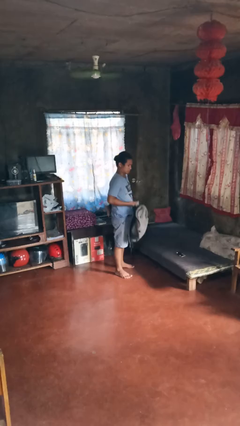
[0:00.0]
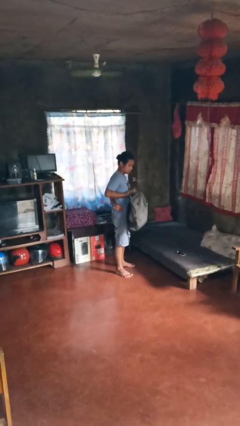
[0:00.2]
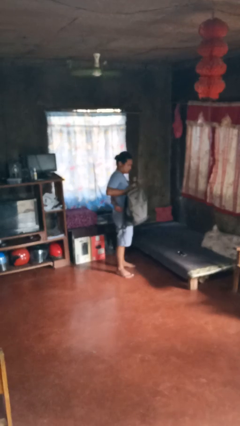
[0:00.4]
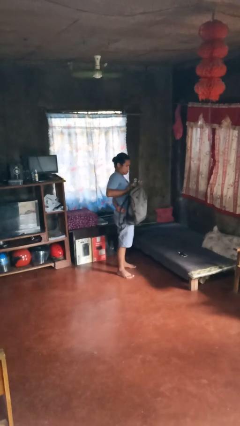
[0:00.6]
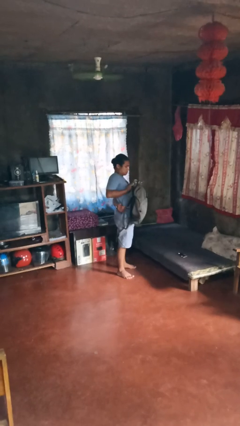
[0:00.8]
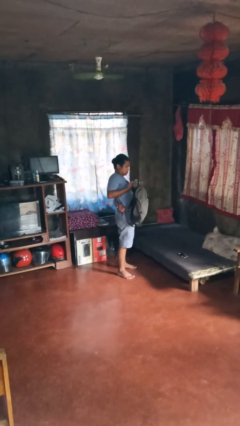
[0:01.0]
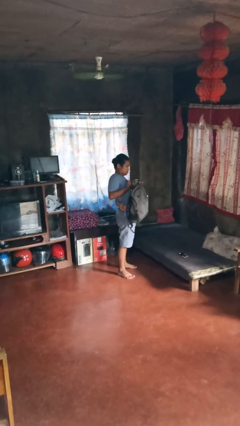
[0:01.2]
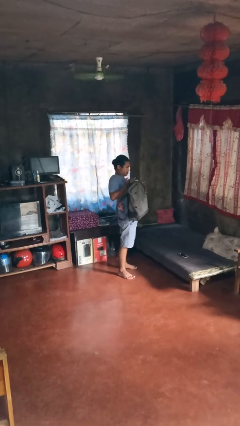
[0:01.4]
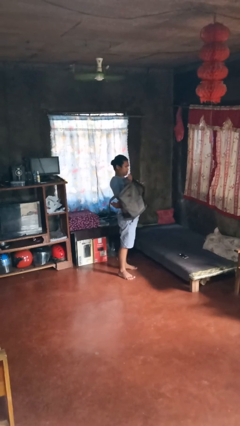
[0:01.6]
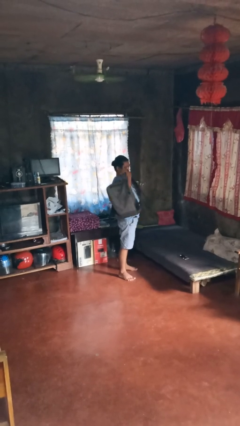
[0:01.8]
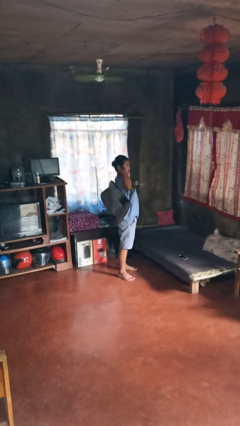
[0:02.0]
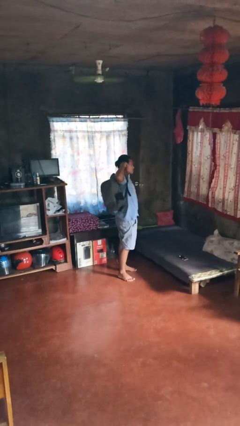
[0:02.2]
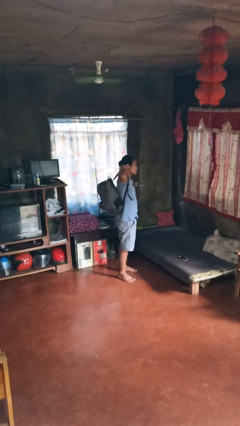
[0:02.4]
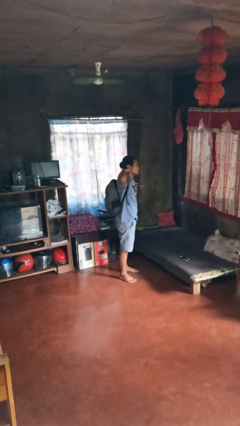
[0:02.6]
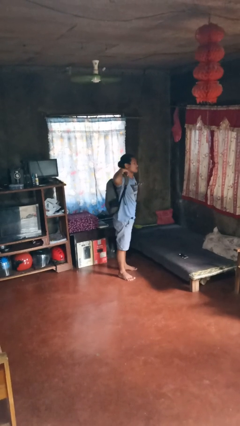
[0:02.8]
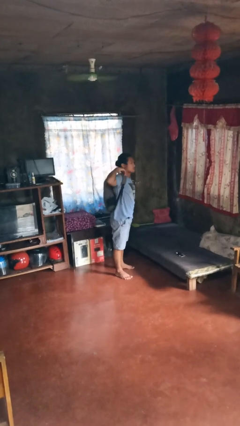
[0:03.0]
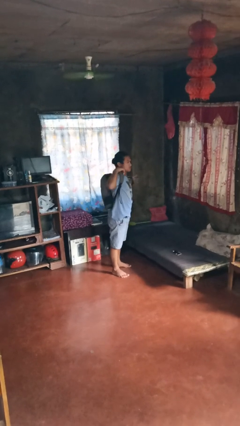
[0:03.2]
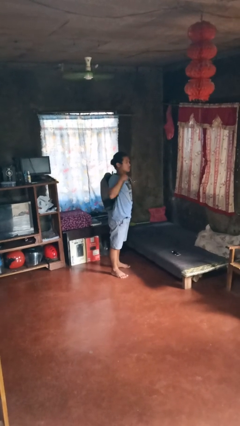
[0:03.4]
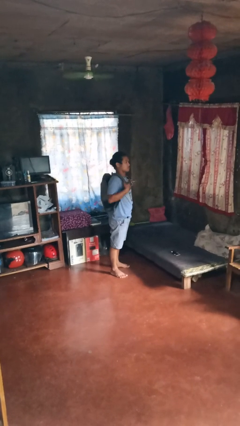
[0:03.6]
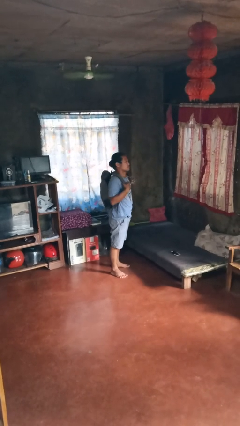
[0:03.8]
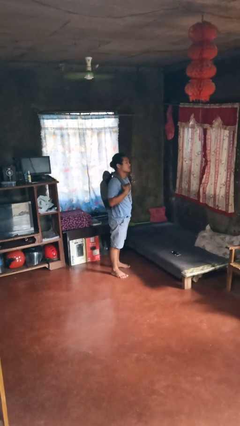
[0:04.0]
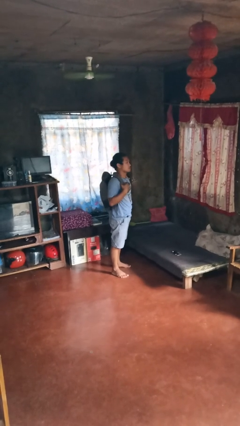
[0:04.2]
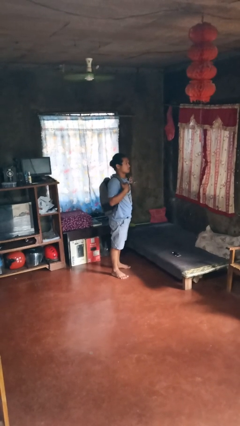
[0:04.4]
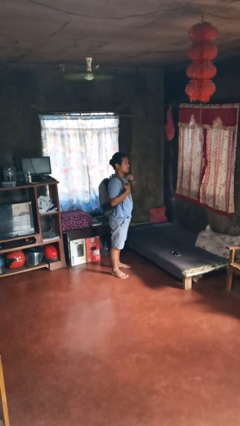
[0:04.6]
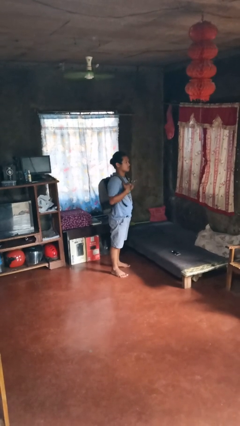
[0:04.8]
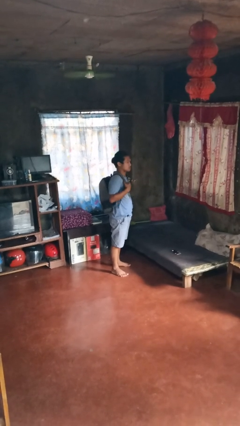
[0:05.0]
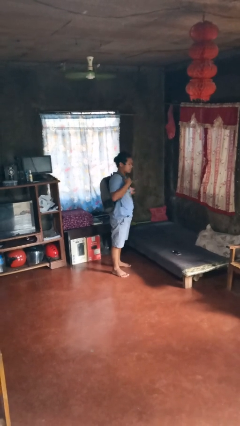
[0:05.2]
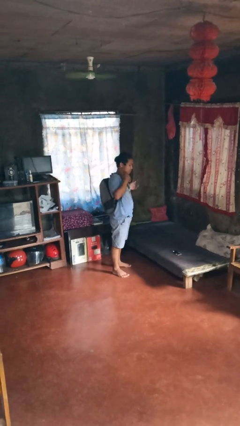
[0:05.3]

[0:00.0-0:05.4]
person puts on backpack

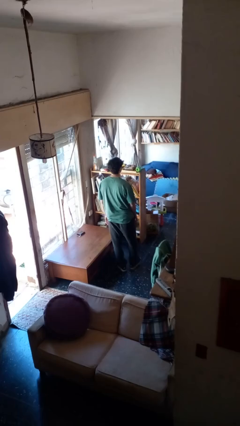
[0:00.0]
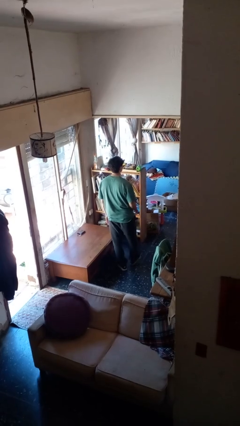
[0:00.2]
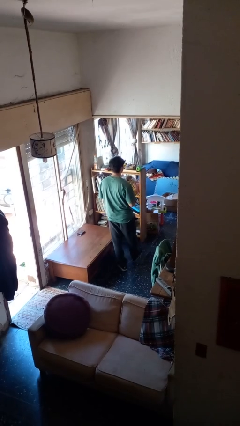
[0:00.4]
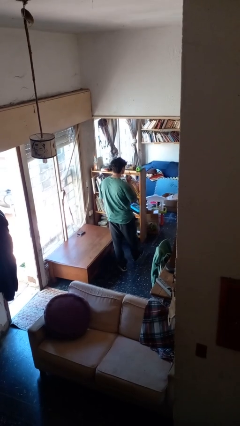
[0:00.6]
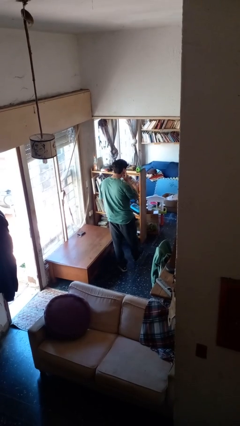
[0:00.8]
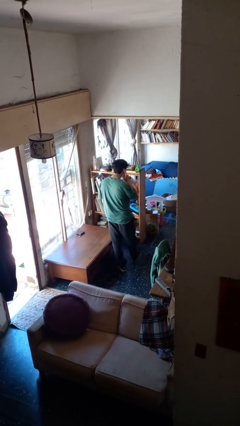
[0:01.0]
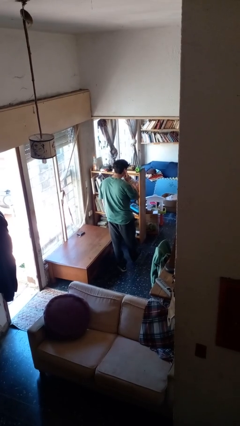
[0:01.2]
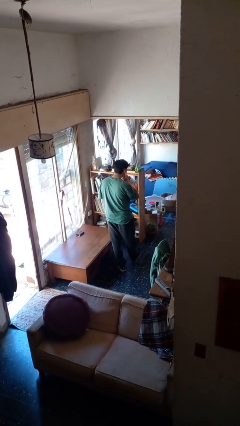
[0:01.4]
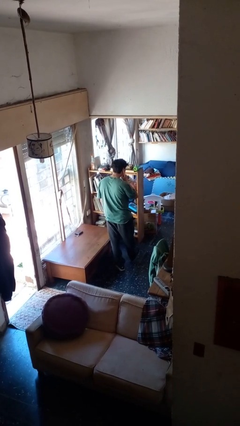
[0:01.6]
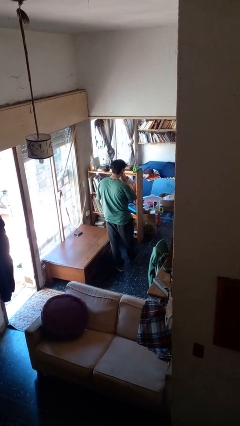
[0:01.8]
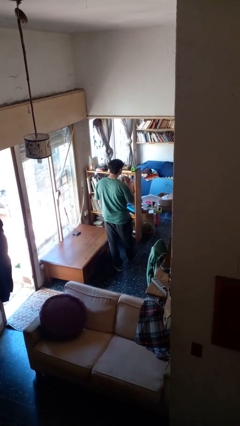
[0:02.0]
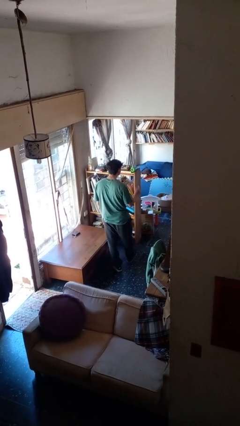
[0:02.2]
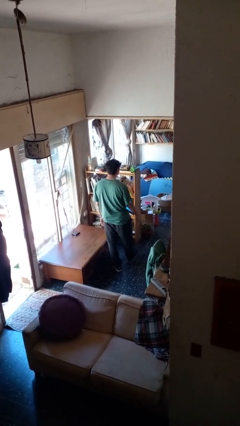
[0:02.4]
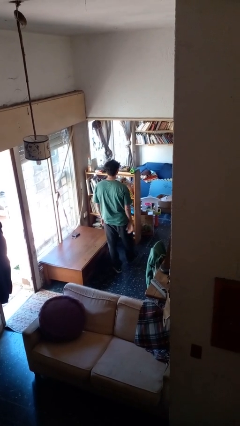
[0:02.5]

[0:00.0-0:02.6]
person gestures listen closely

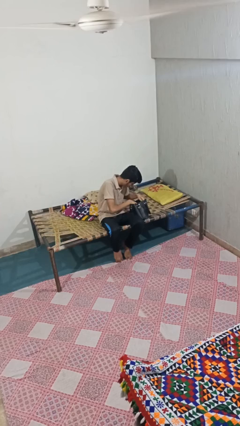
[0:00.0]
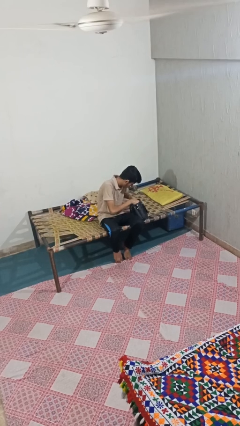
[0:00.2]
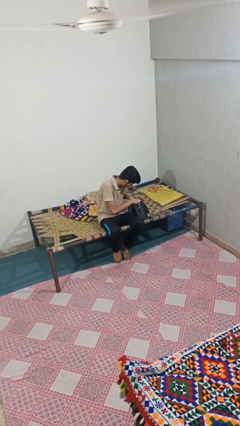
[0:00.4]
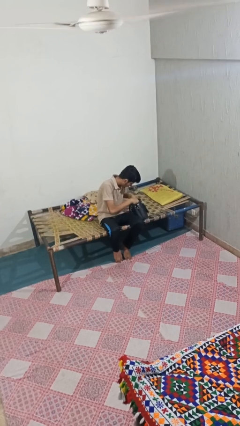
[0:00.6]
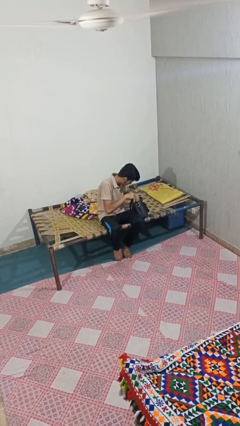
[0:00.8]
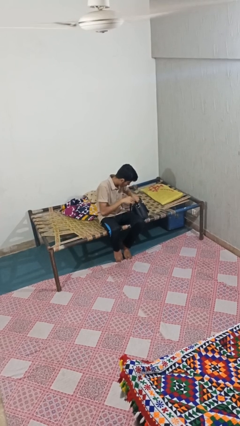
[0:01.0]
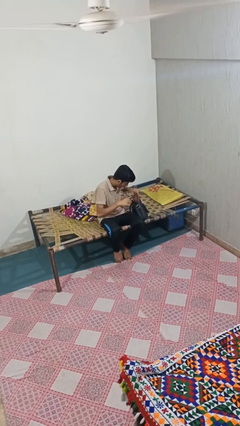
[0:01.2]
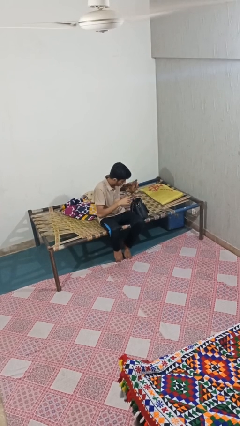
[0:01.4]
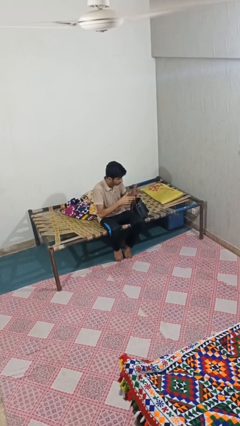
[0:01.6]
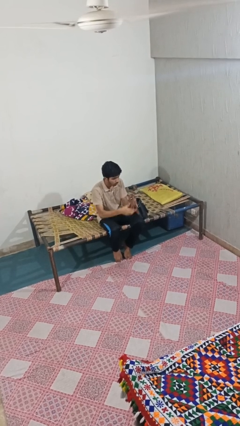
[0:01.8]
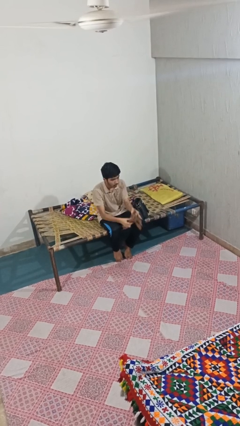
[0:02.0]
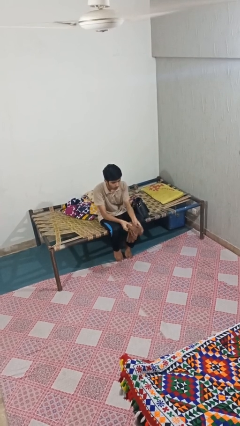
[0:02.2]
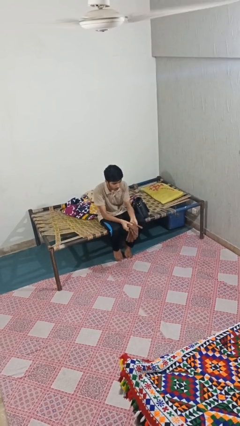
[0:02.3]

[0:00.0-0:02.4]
person takes object from purse

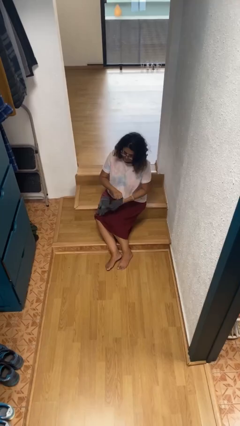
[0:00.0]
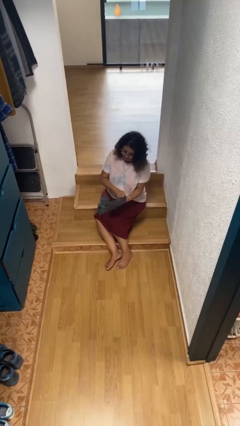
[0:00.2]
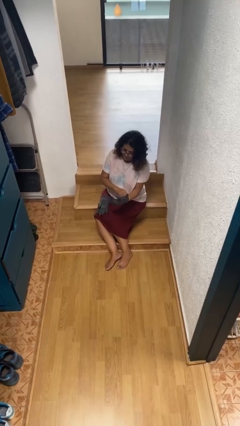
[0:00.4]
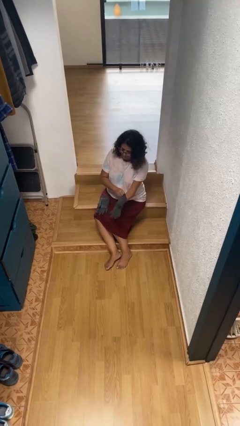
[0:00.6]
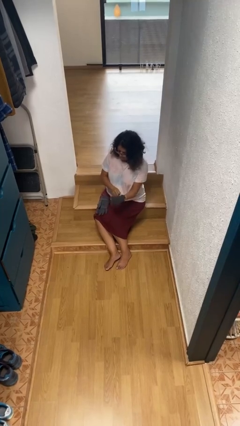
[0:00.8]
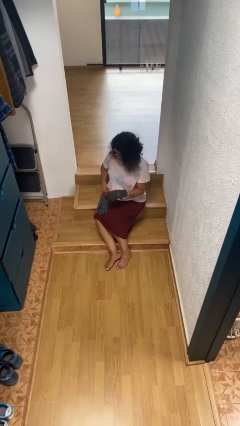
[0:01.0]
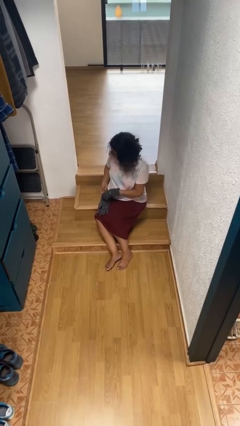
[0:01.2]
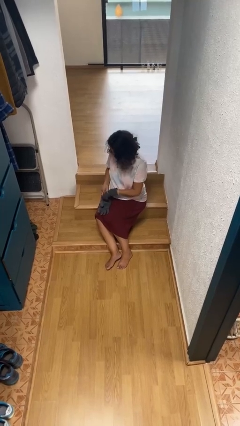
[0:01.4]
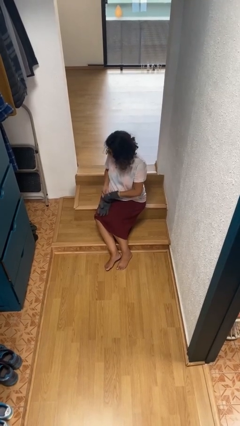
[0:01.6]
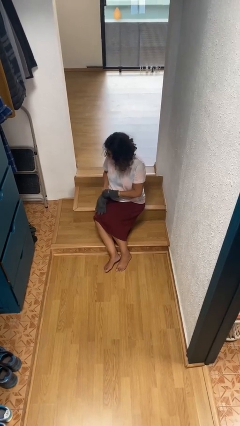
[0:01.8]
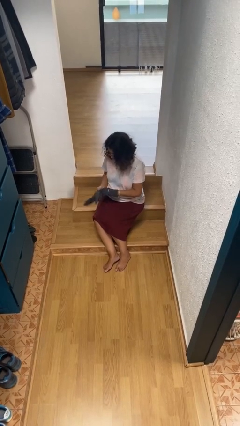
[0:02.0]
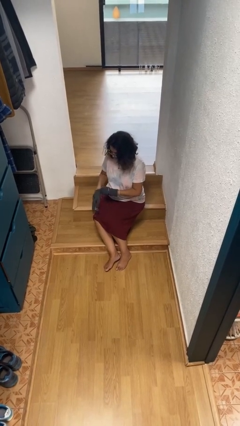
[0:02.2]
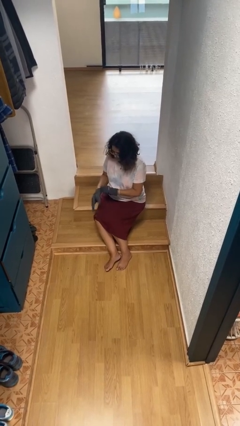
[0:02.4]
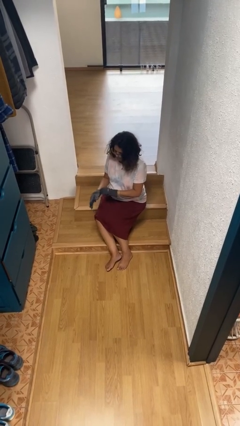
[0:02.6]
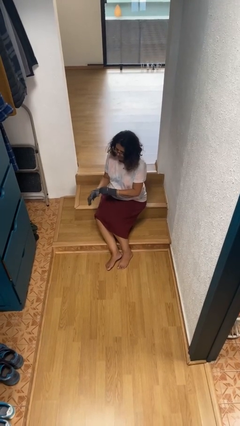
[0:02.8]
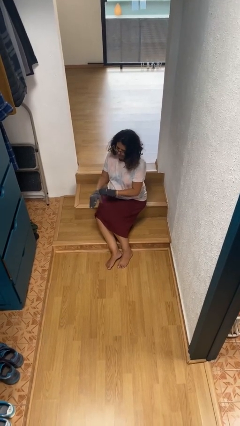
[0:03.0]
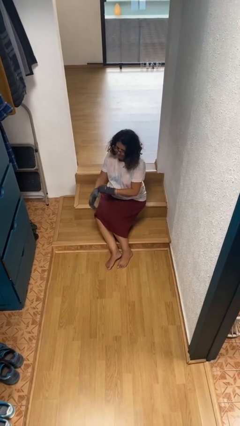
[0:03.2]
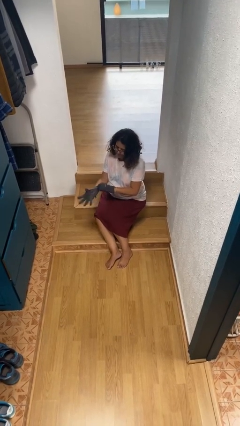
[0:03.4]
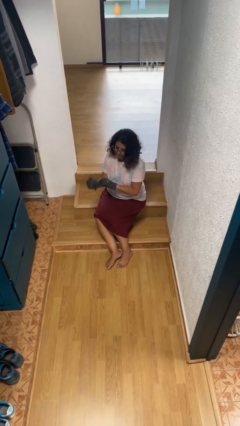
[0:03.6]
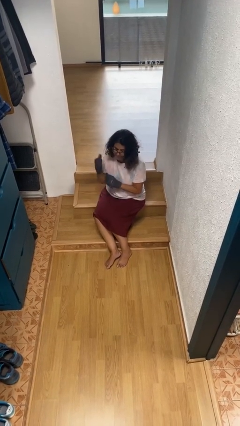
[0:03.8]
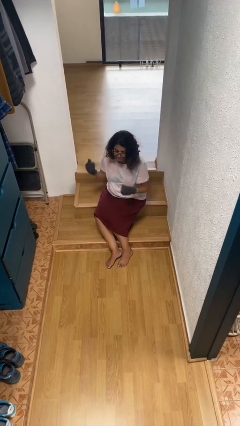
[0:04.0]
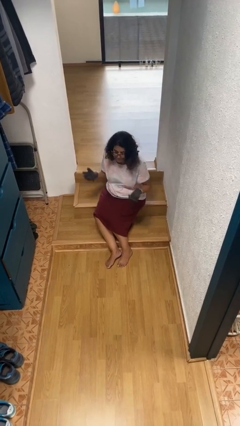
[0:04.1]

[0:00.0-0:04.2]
person puts on gloves

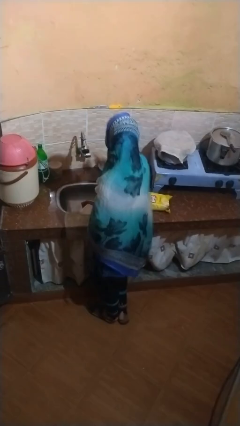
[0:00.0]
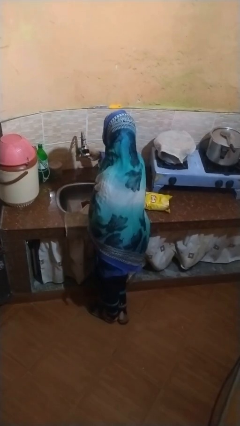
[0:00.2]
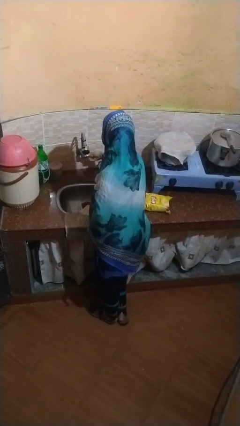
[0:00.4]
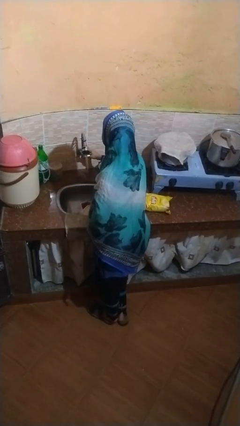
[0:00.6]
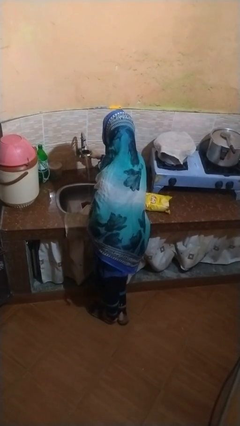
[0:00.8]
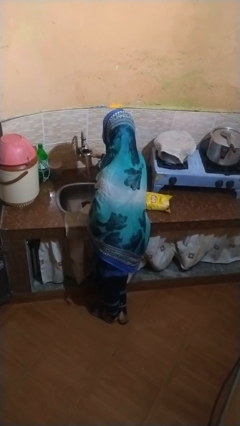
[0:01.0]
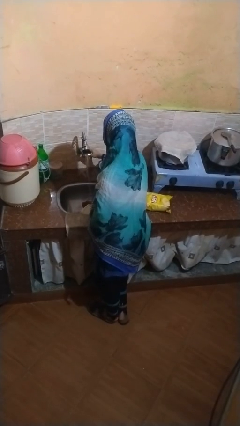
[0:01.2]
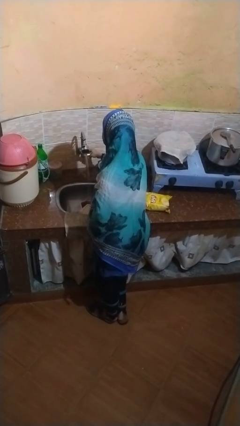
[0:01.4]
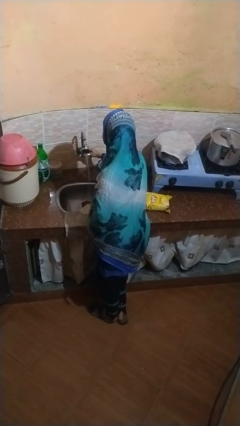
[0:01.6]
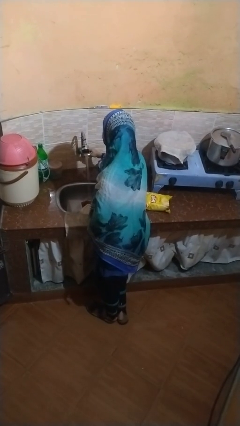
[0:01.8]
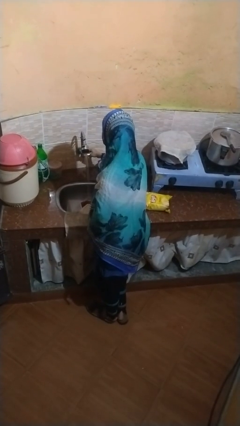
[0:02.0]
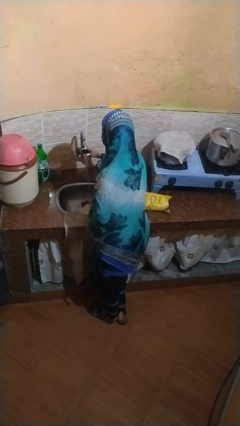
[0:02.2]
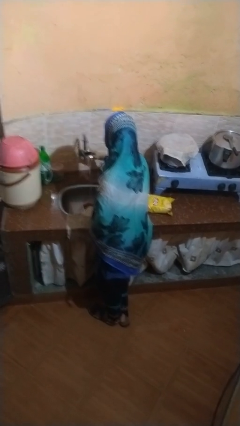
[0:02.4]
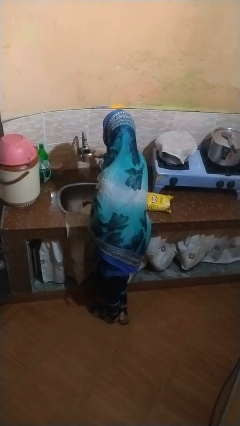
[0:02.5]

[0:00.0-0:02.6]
person turns on faucet

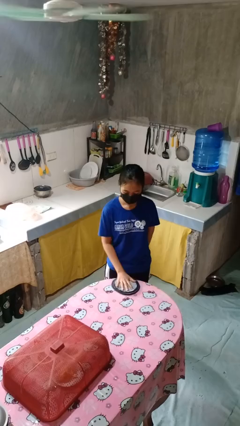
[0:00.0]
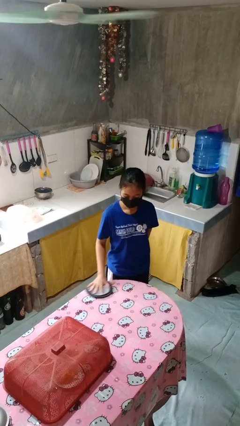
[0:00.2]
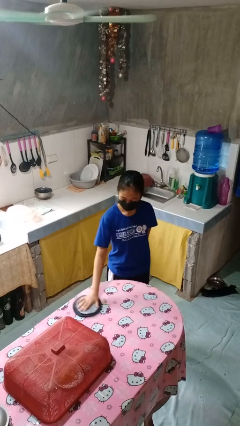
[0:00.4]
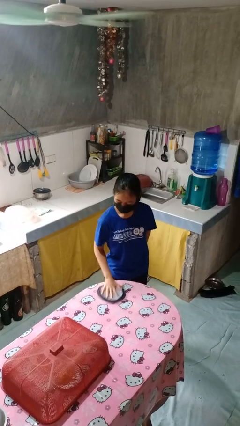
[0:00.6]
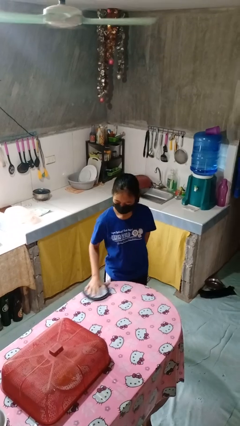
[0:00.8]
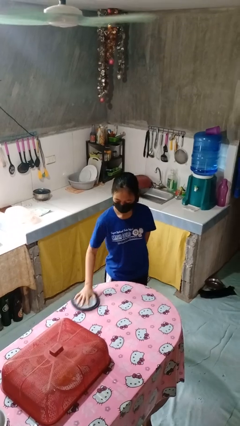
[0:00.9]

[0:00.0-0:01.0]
person cleans table with rag
